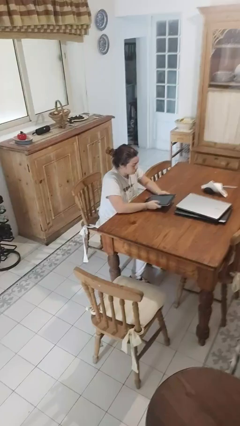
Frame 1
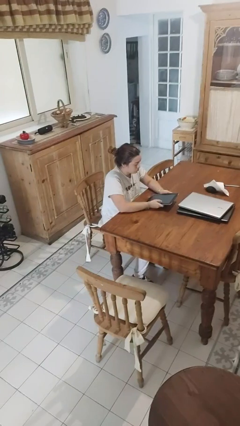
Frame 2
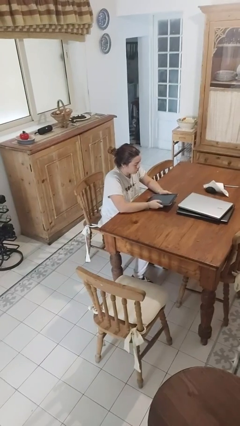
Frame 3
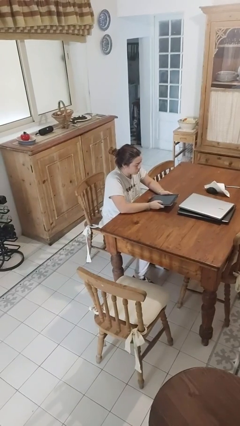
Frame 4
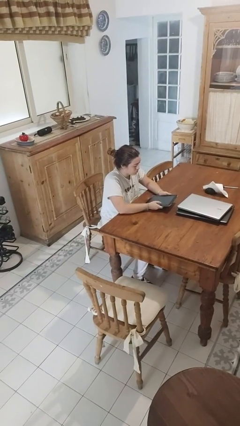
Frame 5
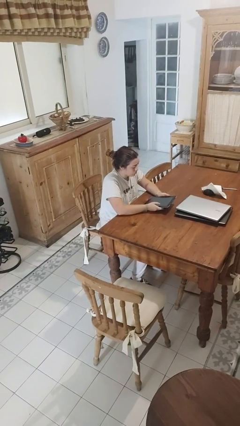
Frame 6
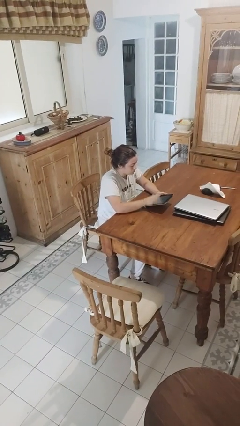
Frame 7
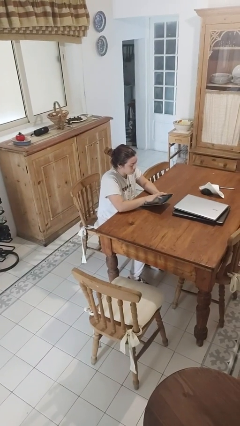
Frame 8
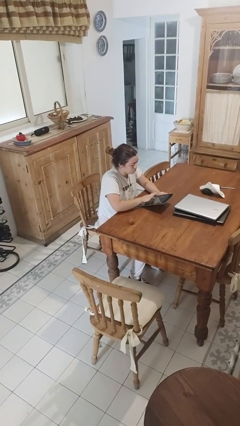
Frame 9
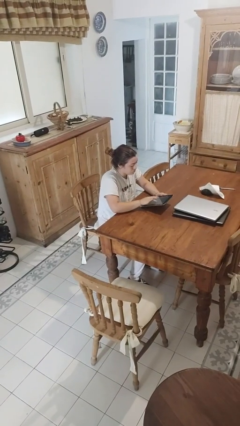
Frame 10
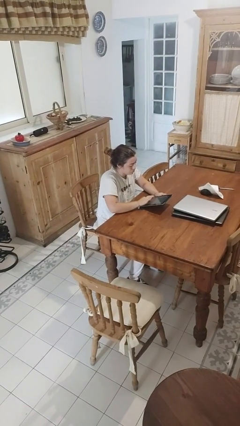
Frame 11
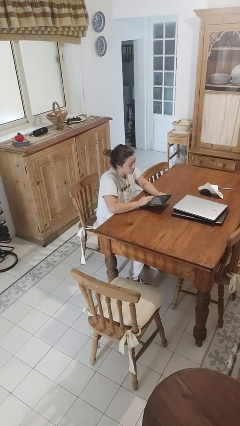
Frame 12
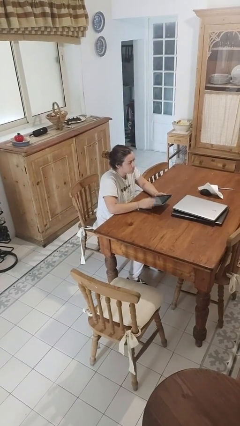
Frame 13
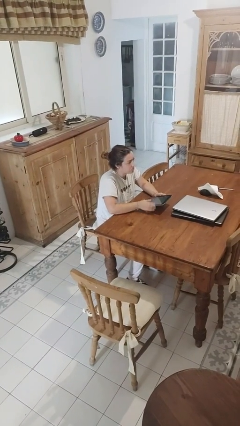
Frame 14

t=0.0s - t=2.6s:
person interacts with tablet

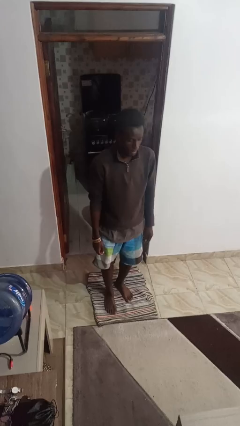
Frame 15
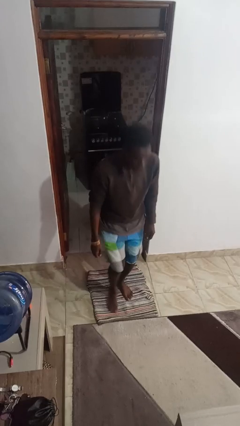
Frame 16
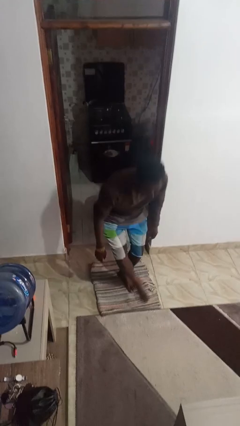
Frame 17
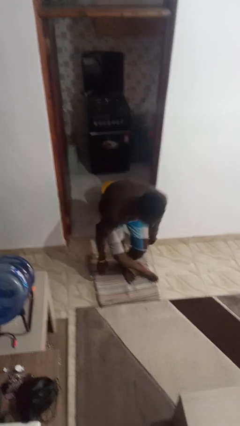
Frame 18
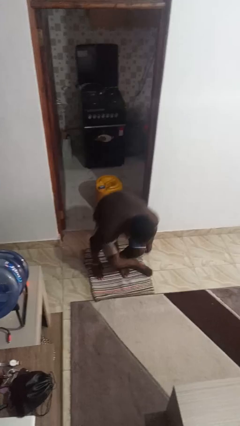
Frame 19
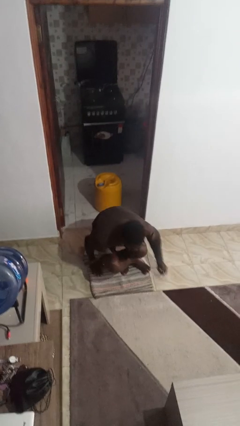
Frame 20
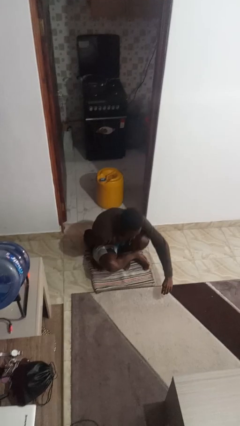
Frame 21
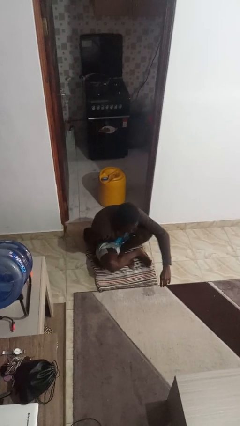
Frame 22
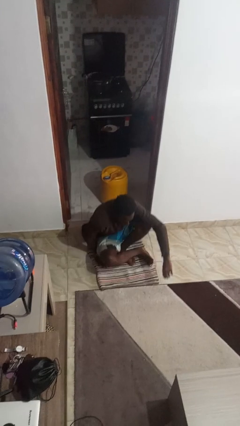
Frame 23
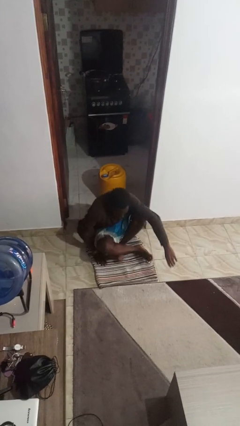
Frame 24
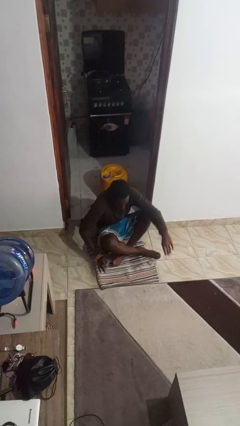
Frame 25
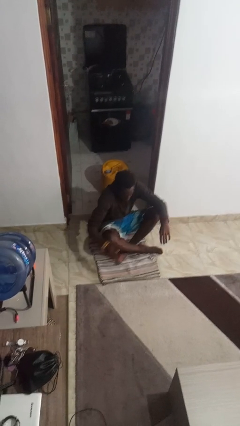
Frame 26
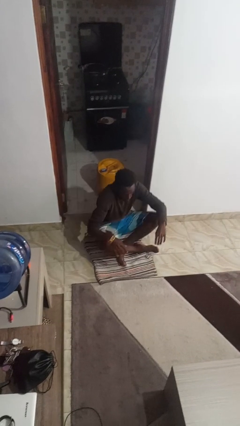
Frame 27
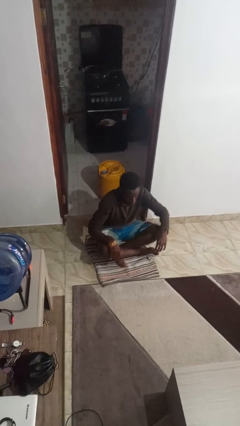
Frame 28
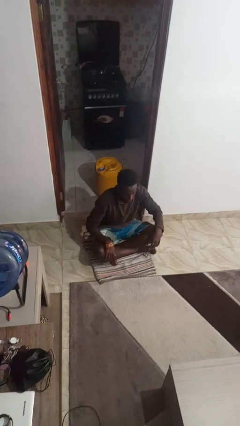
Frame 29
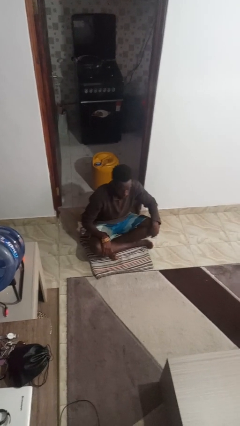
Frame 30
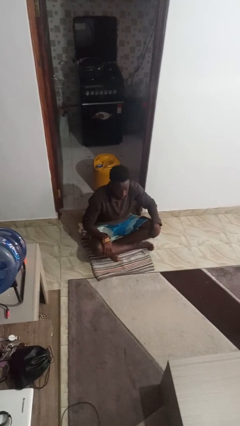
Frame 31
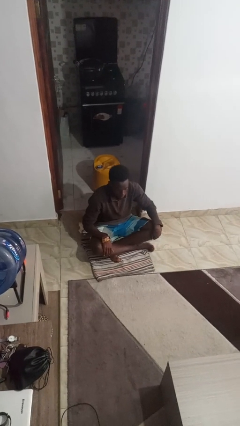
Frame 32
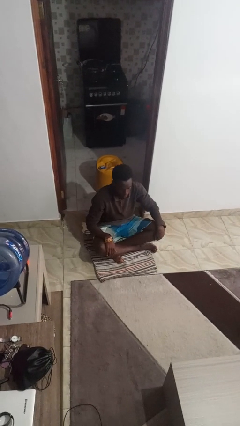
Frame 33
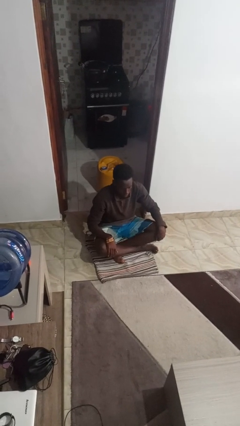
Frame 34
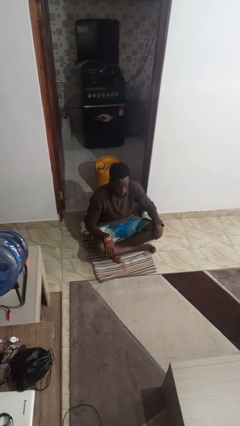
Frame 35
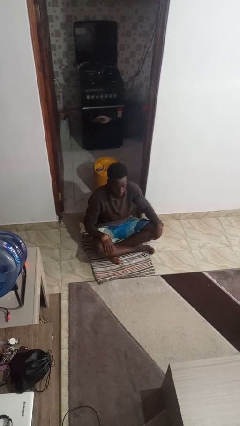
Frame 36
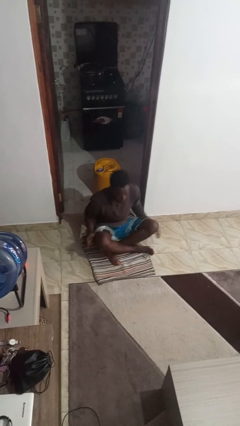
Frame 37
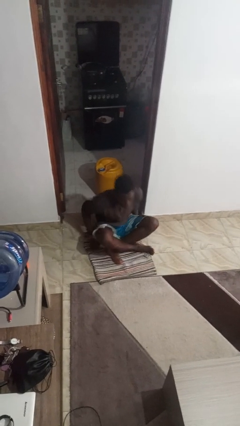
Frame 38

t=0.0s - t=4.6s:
person sits crisscross

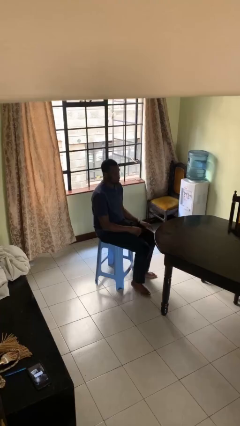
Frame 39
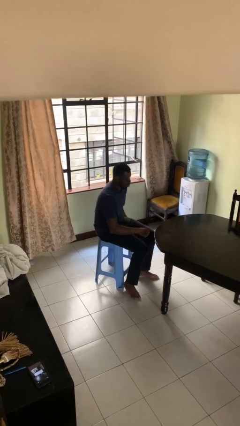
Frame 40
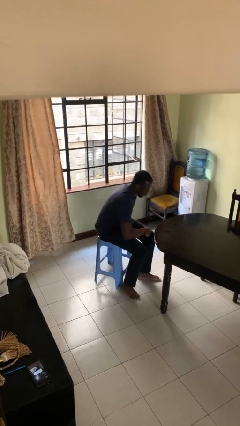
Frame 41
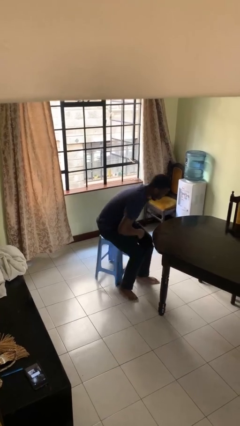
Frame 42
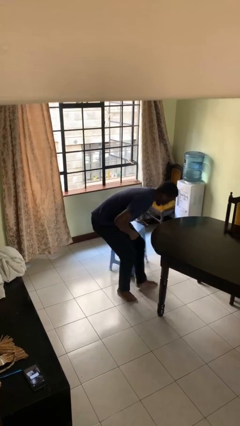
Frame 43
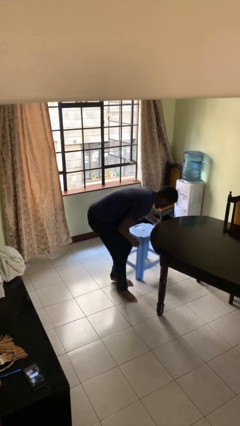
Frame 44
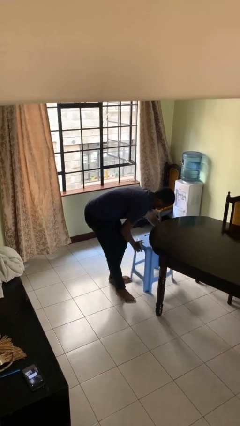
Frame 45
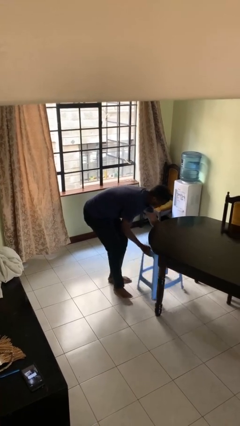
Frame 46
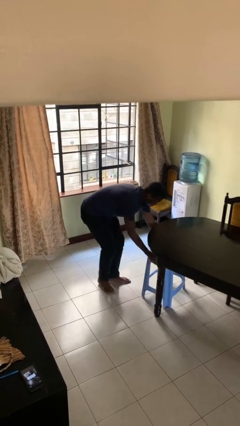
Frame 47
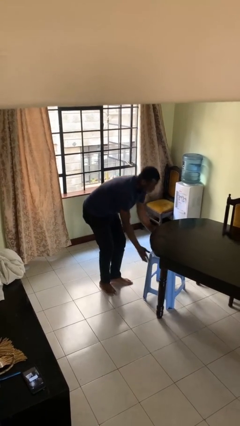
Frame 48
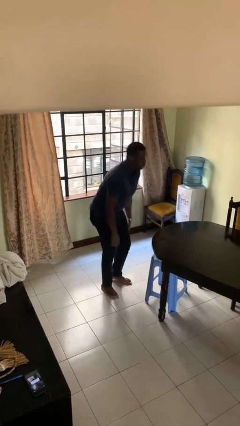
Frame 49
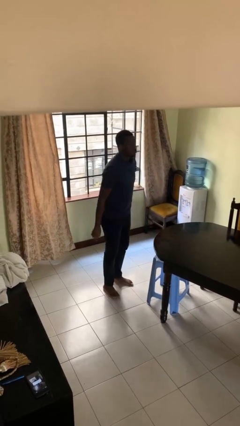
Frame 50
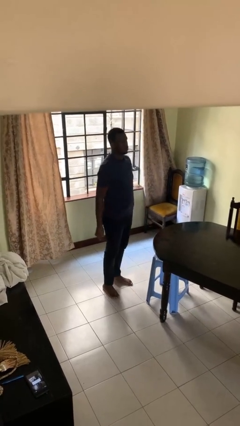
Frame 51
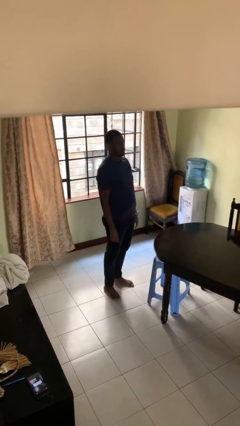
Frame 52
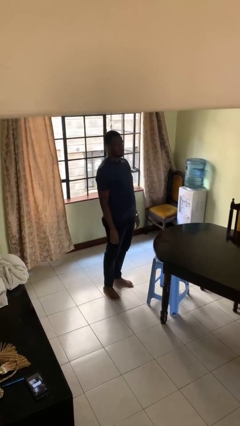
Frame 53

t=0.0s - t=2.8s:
person stands up

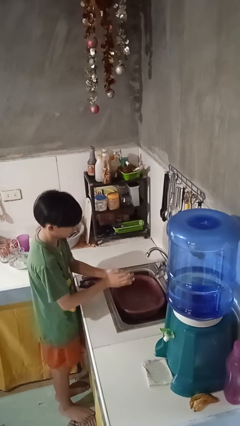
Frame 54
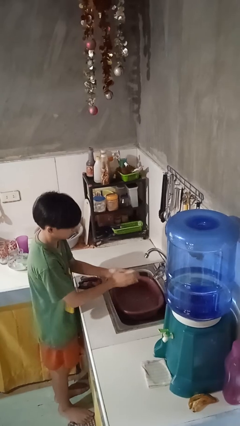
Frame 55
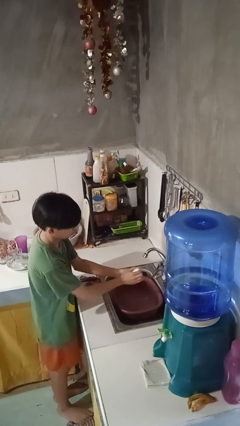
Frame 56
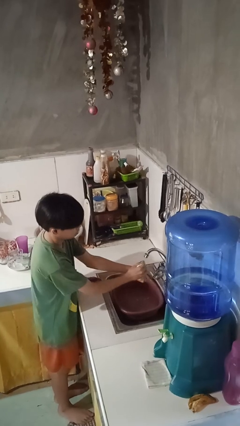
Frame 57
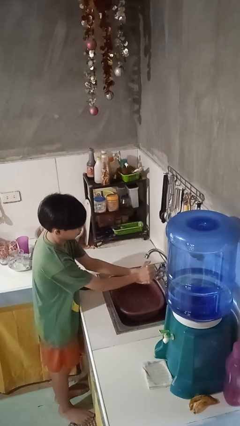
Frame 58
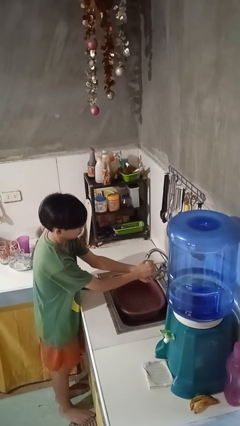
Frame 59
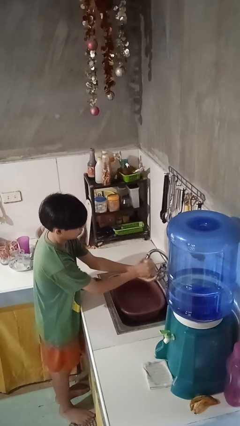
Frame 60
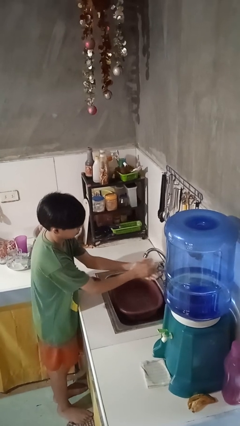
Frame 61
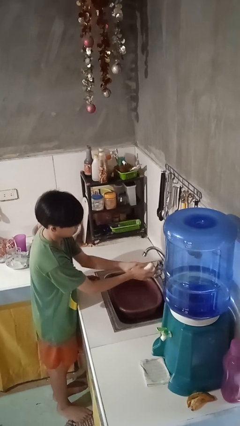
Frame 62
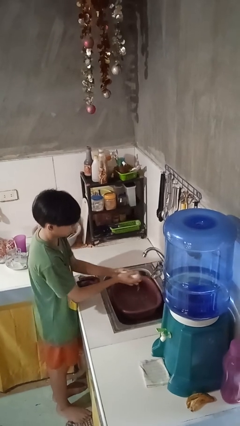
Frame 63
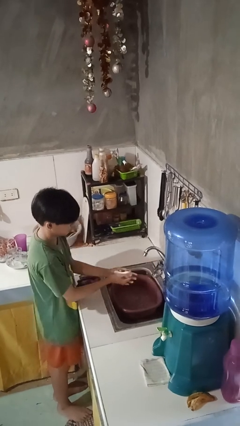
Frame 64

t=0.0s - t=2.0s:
person washes hands

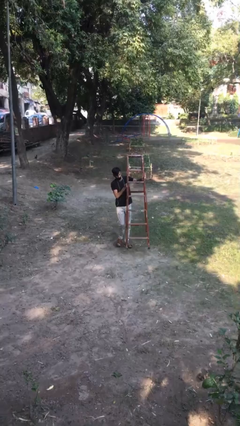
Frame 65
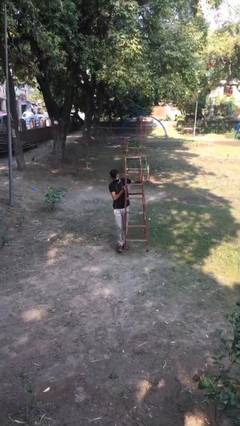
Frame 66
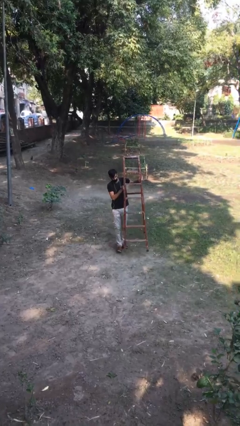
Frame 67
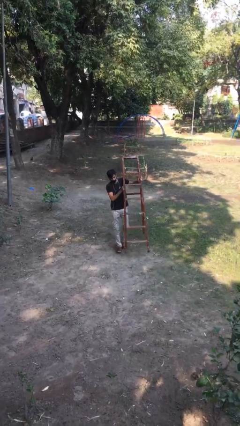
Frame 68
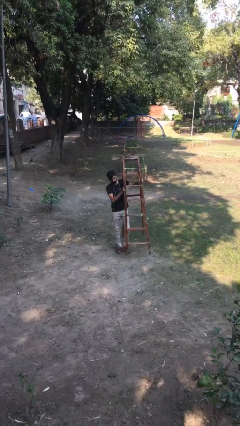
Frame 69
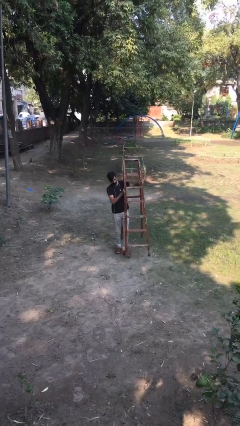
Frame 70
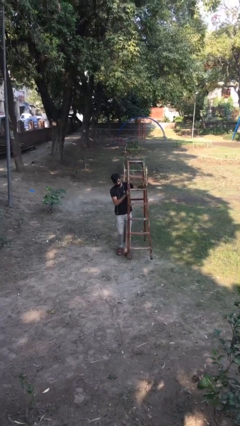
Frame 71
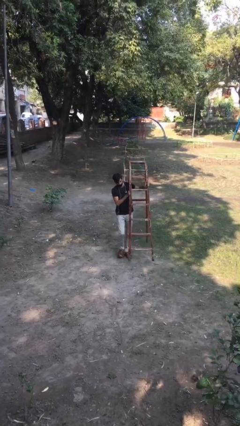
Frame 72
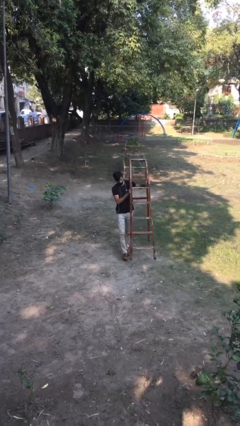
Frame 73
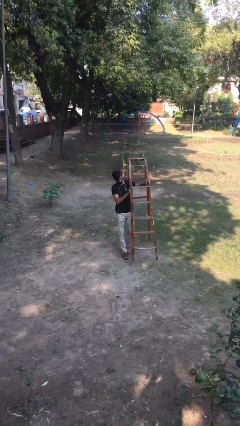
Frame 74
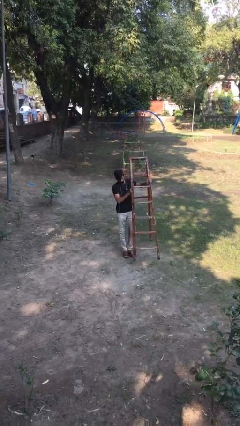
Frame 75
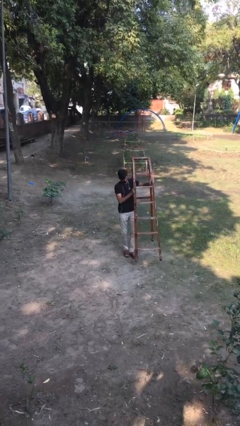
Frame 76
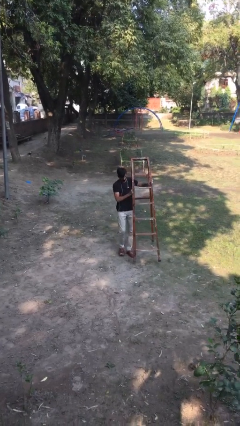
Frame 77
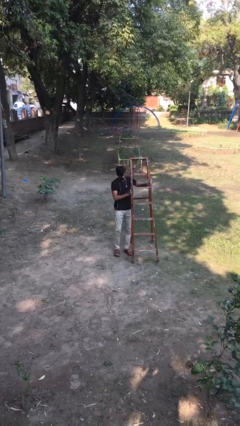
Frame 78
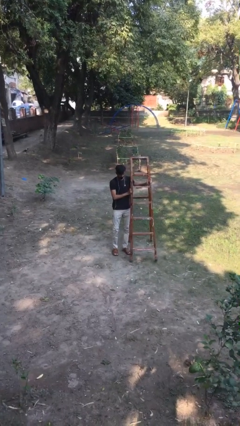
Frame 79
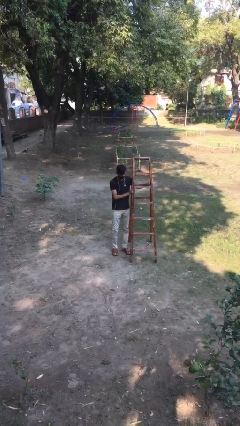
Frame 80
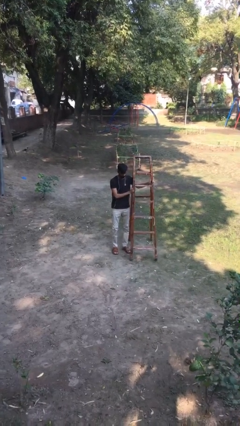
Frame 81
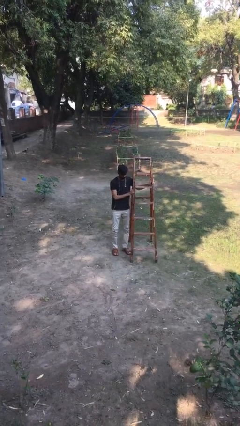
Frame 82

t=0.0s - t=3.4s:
person puts down object on floor

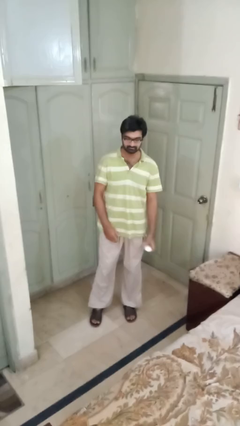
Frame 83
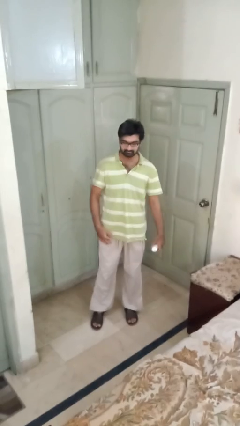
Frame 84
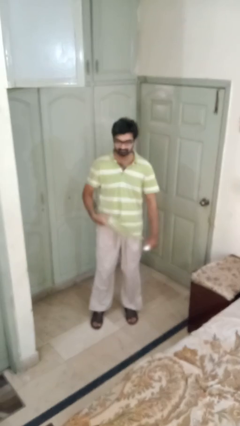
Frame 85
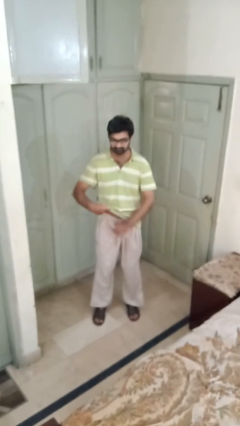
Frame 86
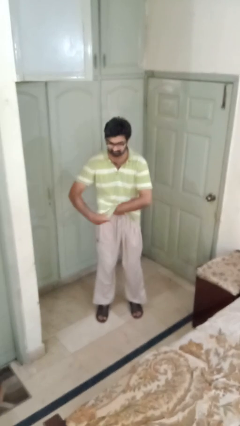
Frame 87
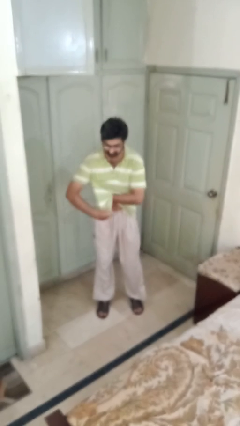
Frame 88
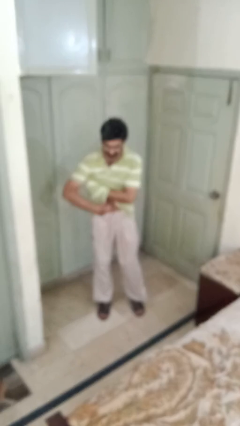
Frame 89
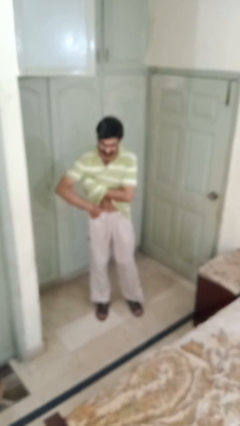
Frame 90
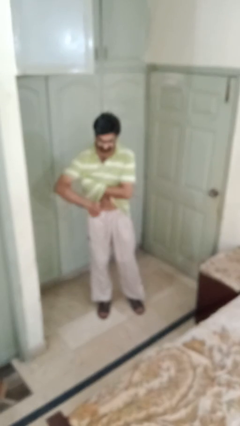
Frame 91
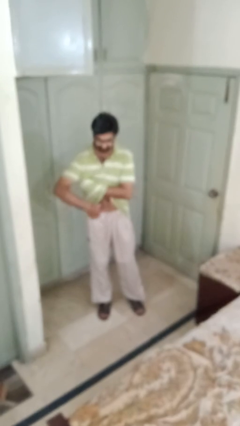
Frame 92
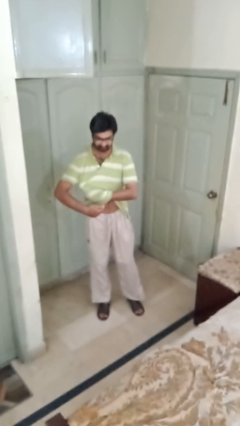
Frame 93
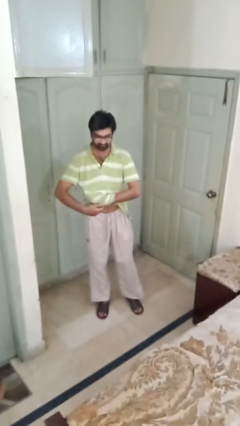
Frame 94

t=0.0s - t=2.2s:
person applies deodorant
